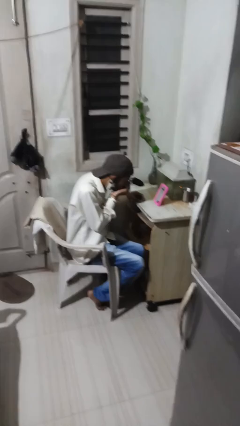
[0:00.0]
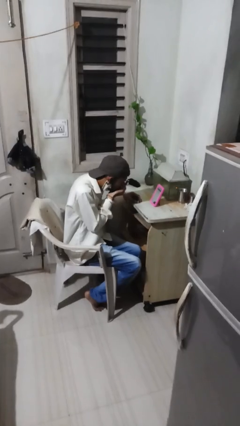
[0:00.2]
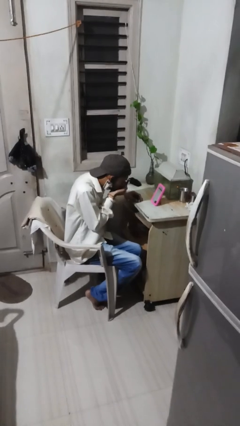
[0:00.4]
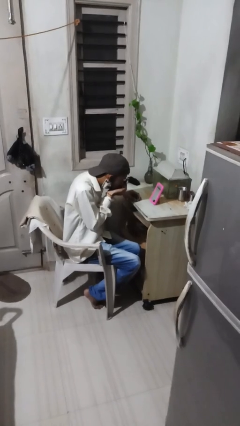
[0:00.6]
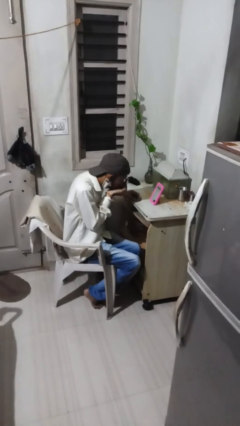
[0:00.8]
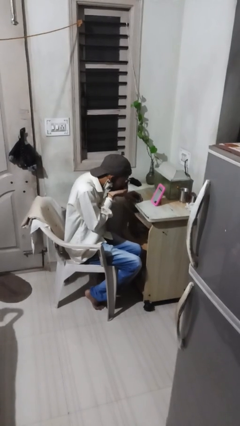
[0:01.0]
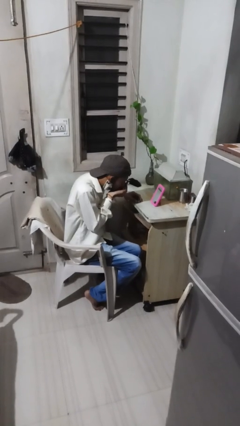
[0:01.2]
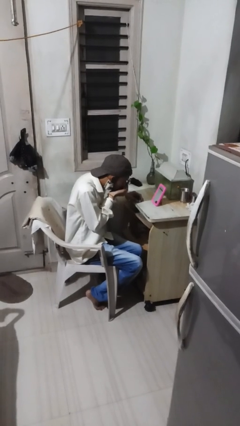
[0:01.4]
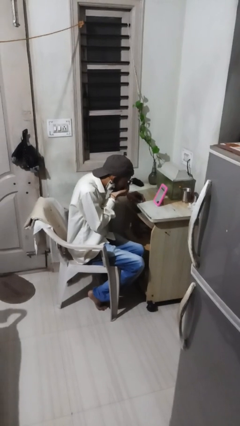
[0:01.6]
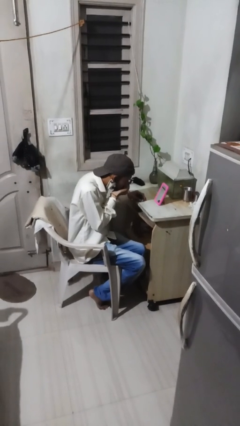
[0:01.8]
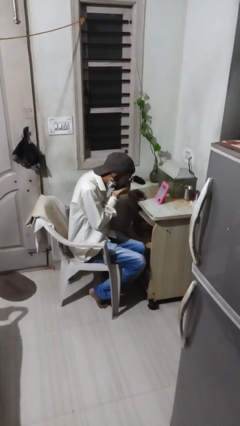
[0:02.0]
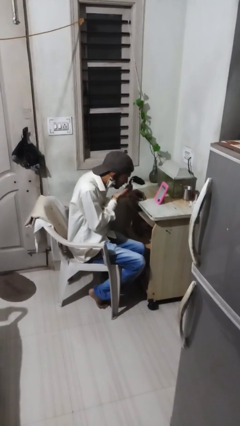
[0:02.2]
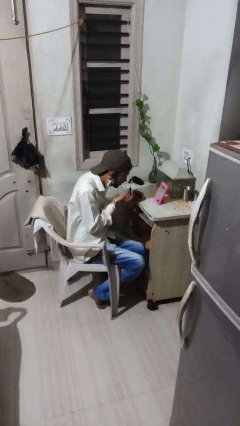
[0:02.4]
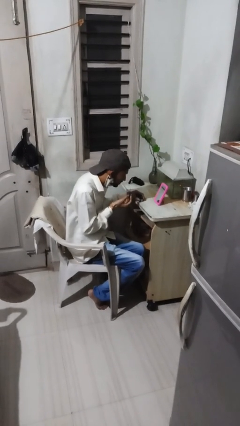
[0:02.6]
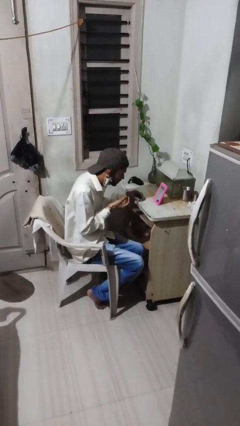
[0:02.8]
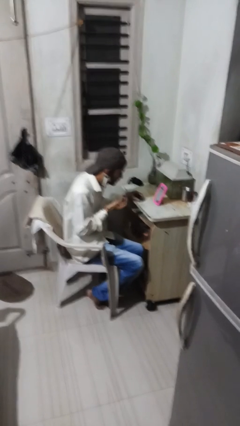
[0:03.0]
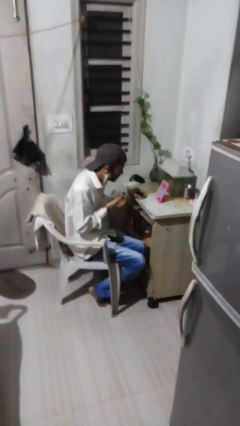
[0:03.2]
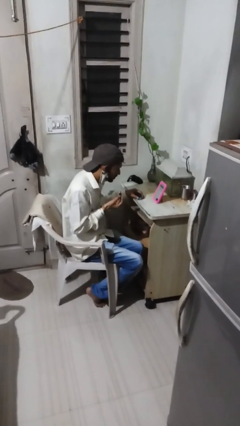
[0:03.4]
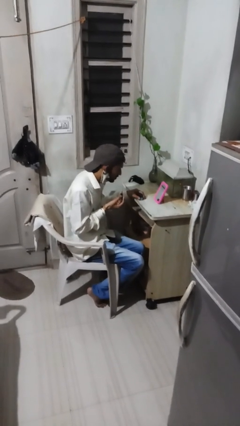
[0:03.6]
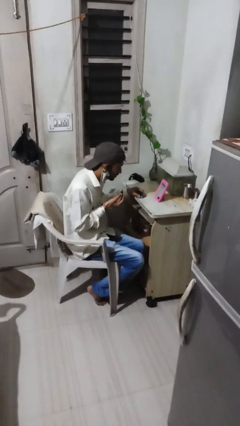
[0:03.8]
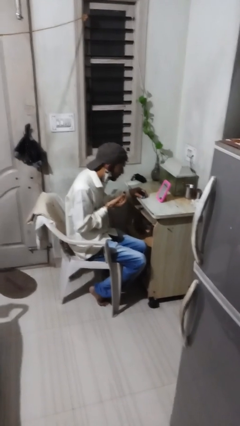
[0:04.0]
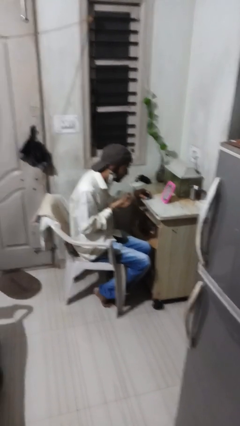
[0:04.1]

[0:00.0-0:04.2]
person applies eye makeup

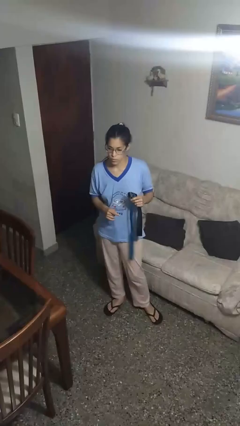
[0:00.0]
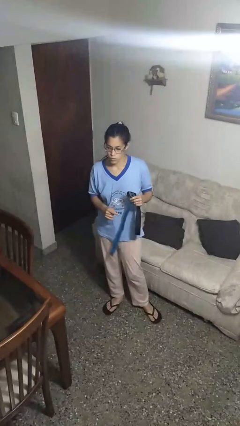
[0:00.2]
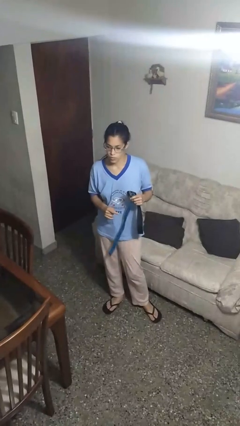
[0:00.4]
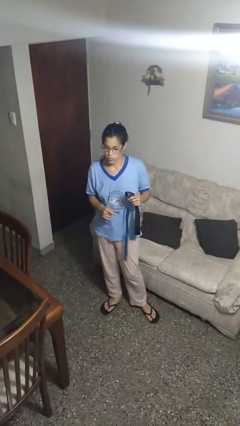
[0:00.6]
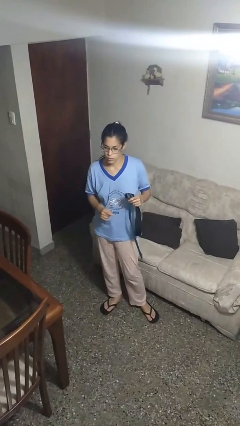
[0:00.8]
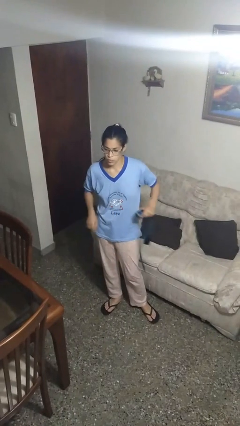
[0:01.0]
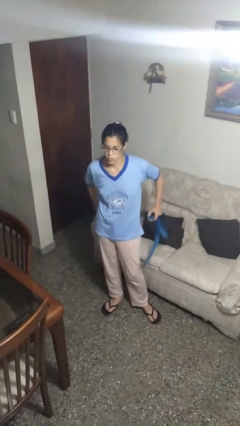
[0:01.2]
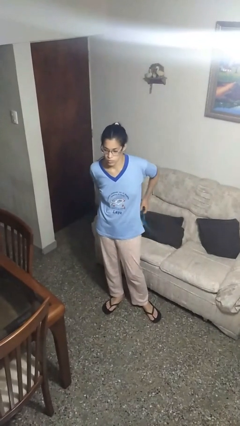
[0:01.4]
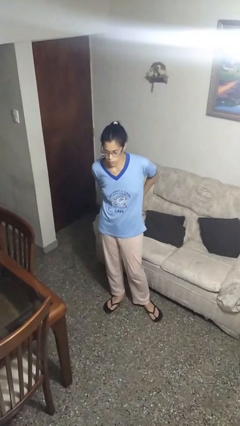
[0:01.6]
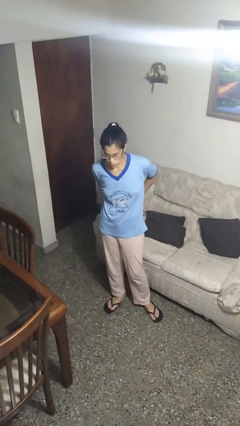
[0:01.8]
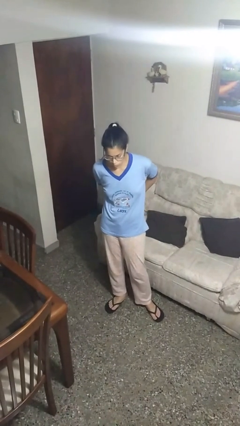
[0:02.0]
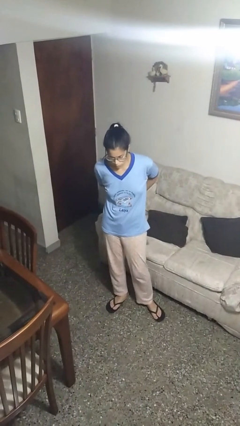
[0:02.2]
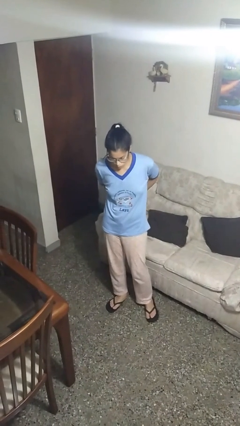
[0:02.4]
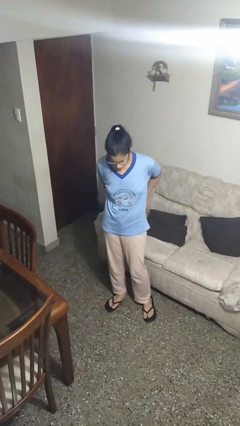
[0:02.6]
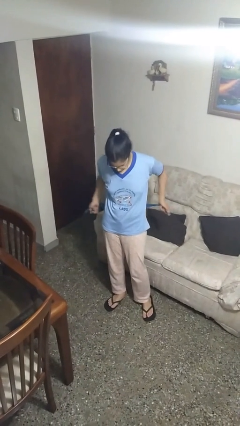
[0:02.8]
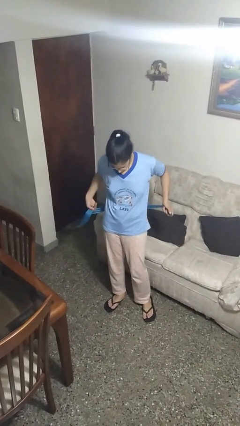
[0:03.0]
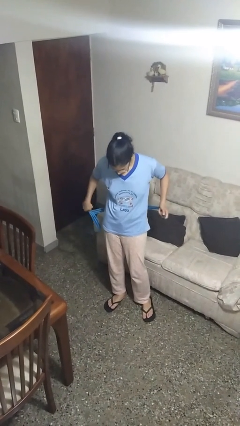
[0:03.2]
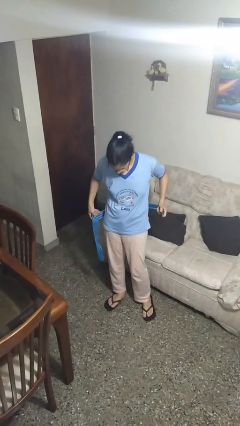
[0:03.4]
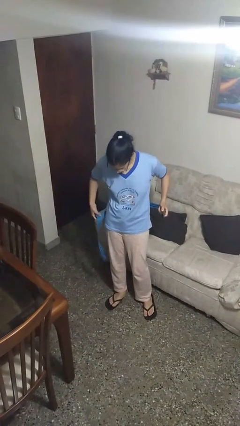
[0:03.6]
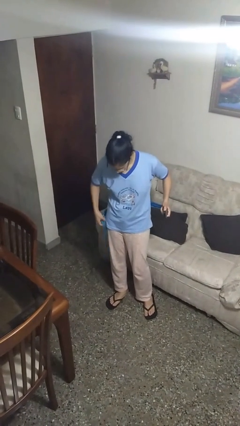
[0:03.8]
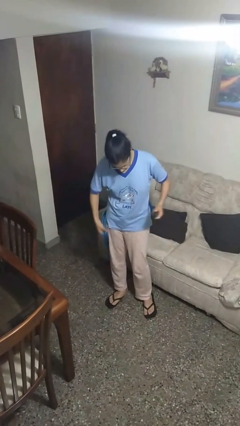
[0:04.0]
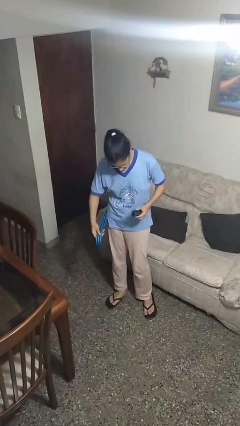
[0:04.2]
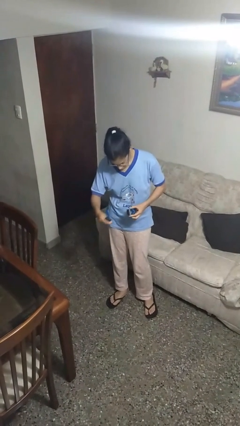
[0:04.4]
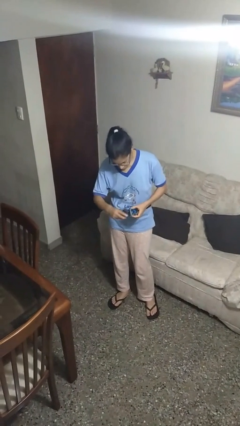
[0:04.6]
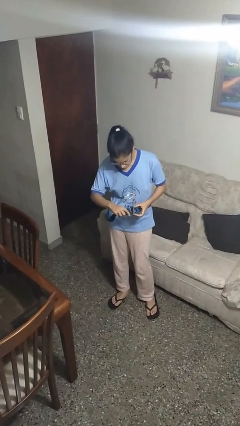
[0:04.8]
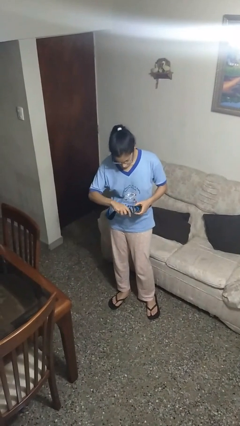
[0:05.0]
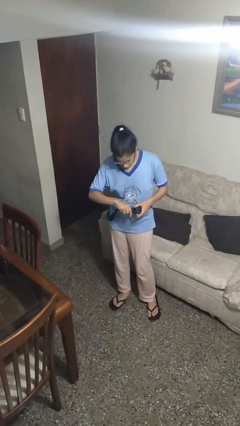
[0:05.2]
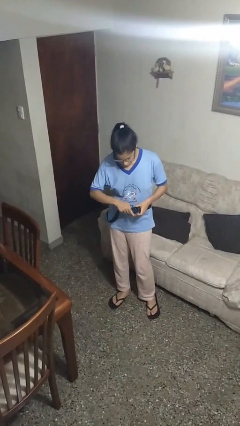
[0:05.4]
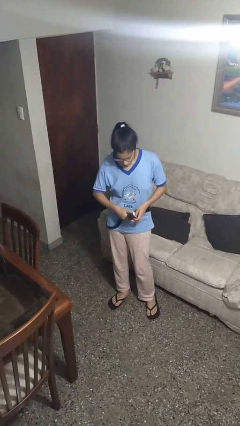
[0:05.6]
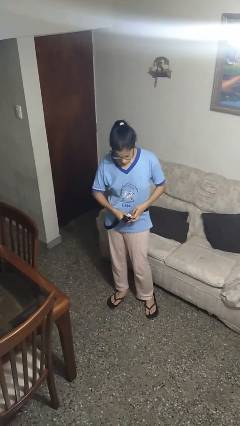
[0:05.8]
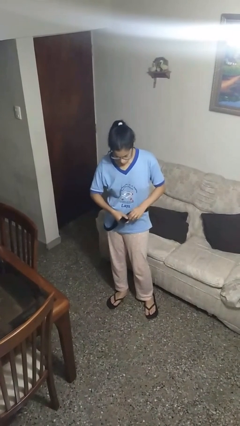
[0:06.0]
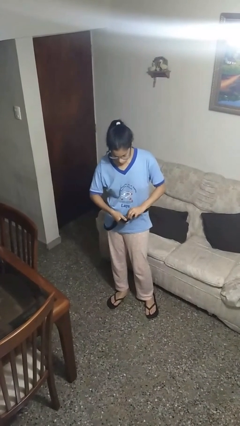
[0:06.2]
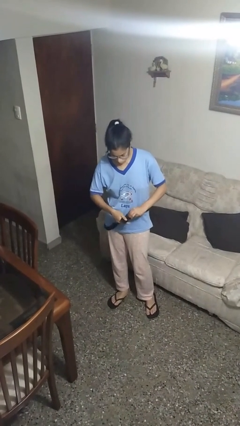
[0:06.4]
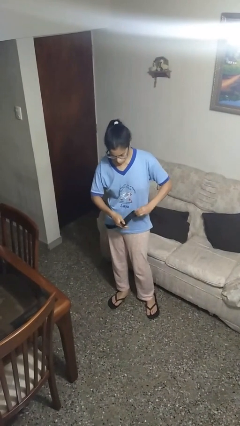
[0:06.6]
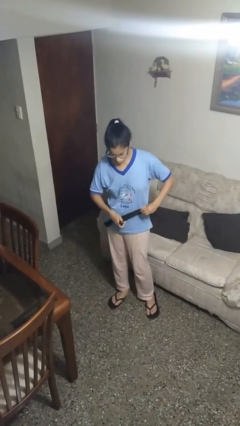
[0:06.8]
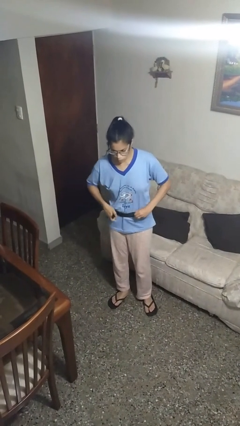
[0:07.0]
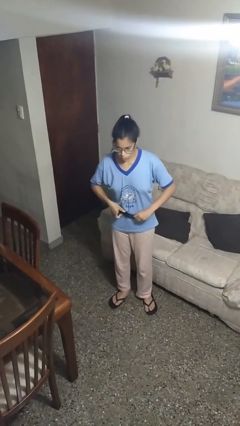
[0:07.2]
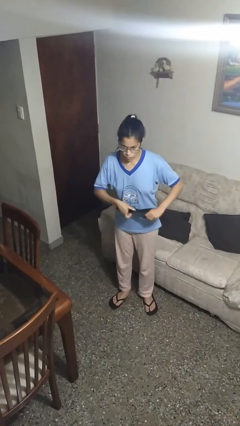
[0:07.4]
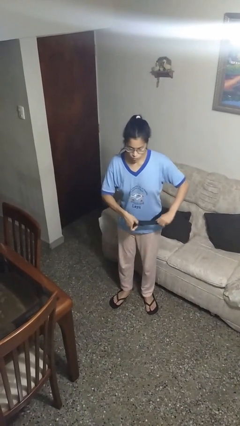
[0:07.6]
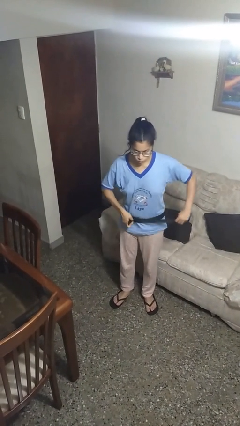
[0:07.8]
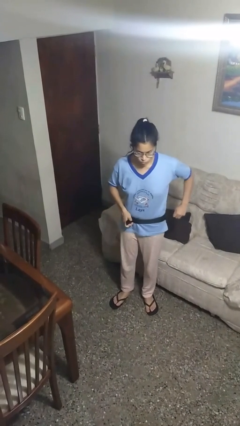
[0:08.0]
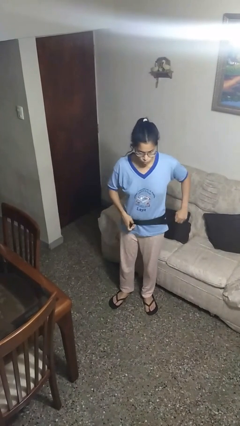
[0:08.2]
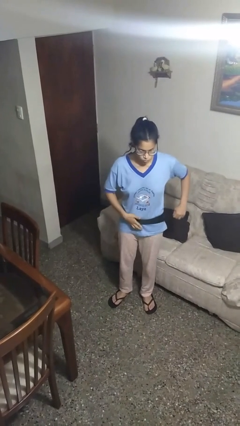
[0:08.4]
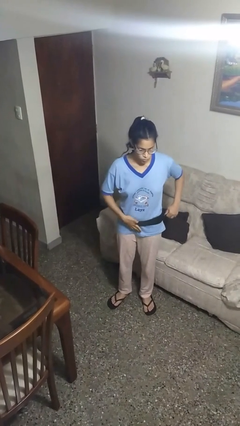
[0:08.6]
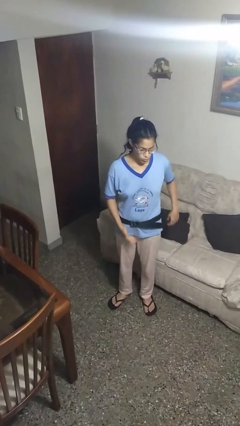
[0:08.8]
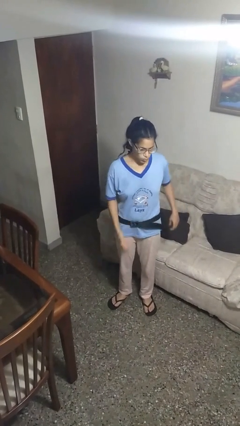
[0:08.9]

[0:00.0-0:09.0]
person puts on belt

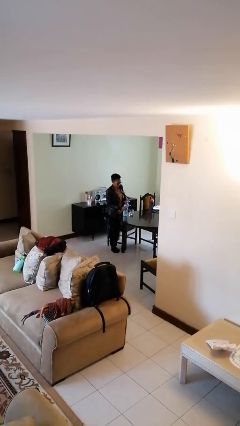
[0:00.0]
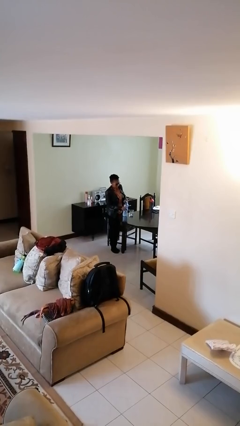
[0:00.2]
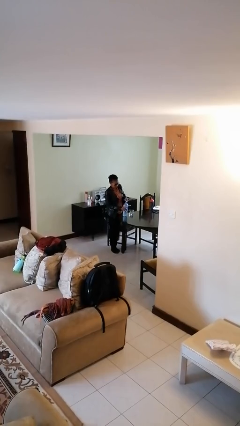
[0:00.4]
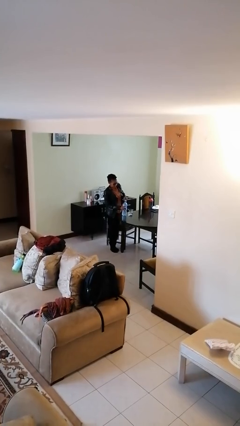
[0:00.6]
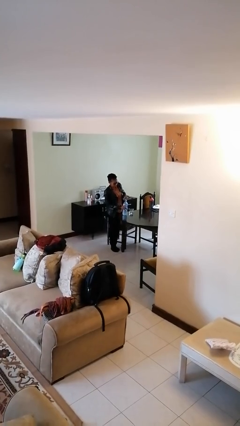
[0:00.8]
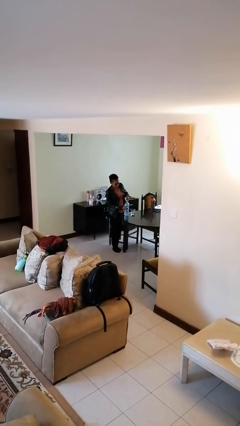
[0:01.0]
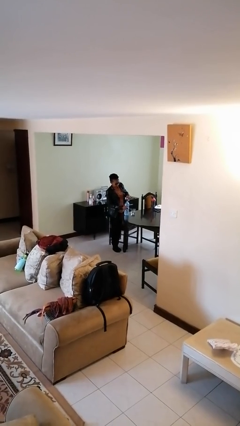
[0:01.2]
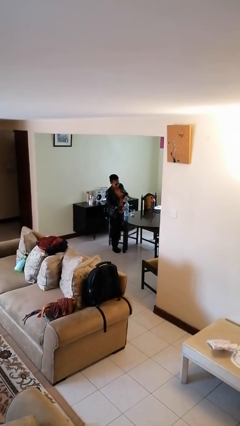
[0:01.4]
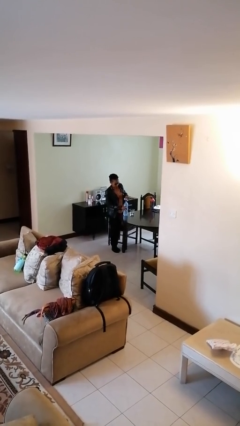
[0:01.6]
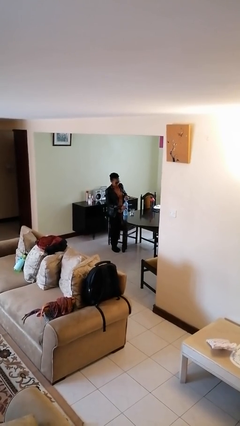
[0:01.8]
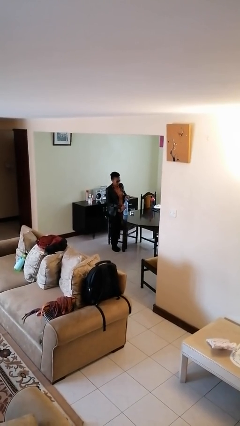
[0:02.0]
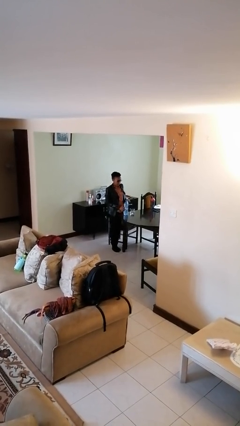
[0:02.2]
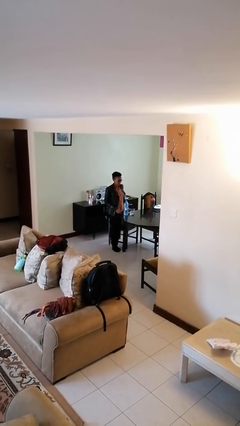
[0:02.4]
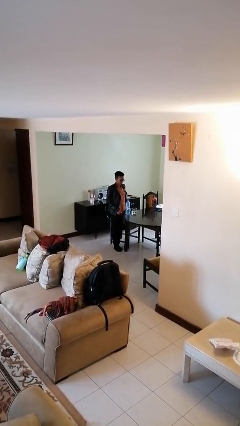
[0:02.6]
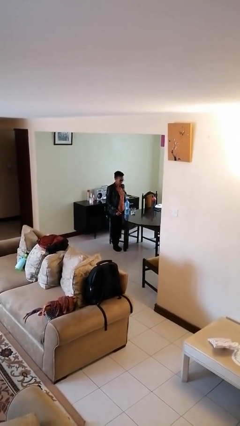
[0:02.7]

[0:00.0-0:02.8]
person screws lid to bottle

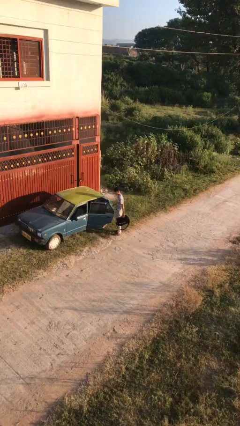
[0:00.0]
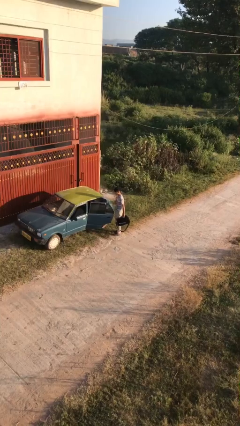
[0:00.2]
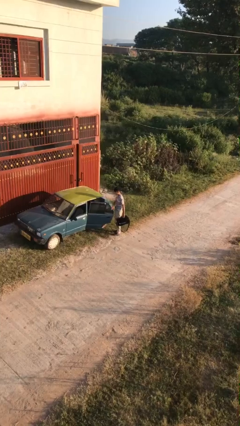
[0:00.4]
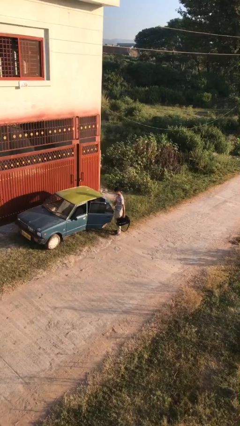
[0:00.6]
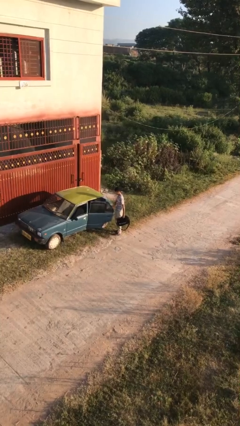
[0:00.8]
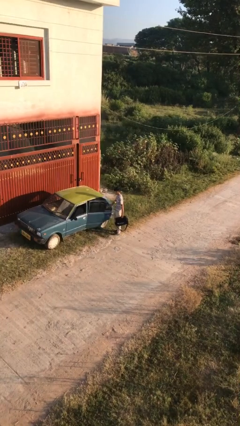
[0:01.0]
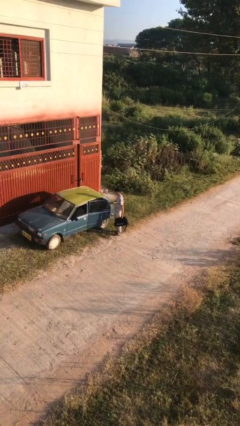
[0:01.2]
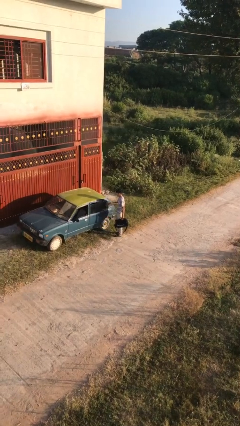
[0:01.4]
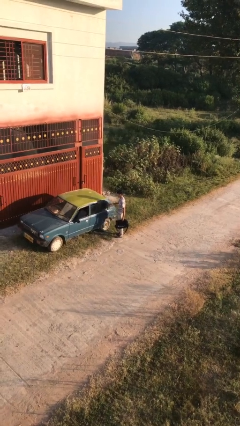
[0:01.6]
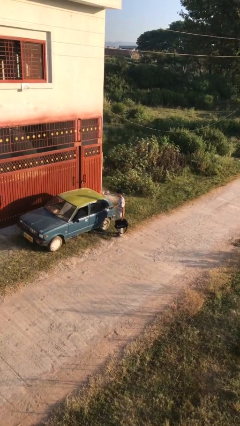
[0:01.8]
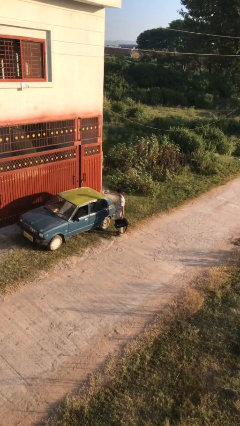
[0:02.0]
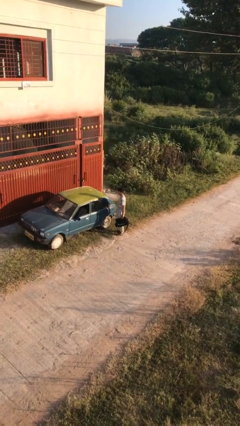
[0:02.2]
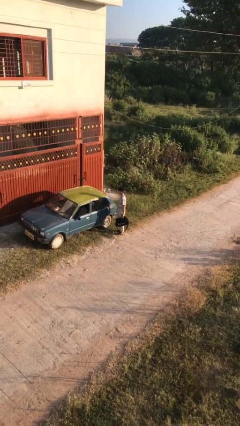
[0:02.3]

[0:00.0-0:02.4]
person closes car door
